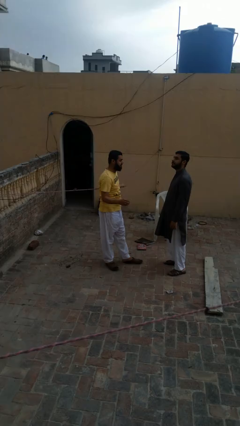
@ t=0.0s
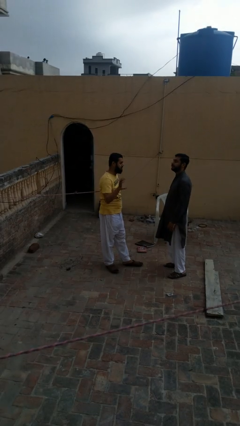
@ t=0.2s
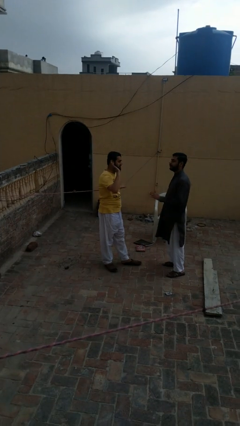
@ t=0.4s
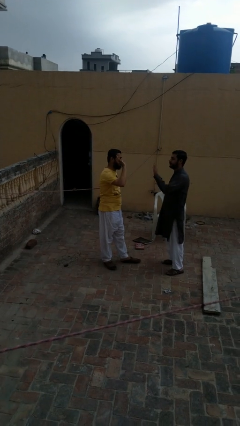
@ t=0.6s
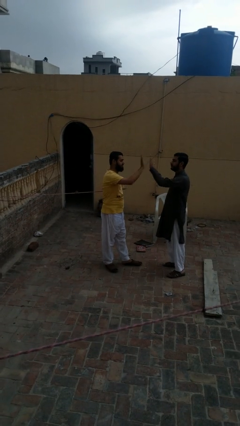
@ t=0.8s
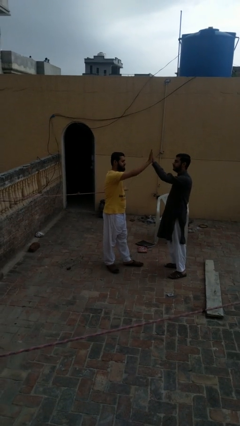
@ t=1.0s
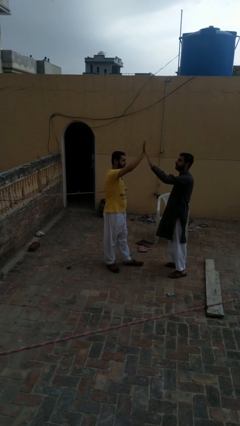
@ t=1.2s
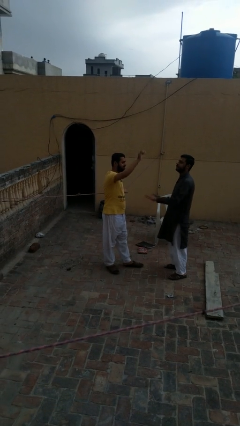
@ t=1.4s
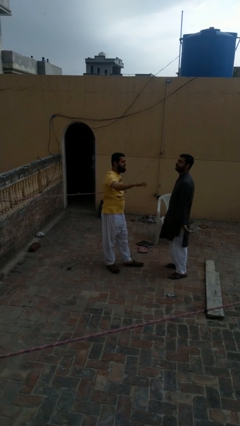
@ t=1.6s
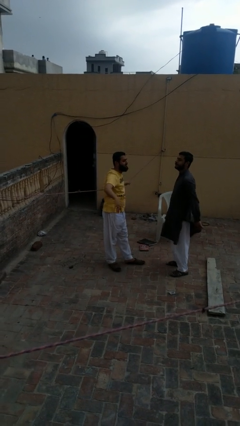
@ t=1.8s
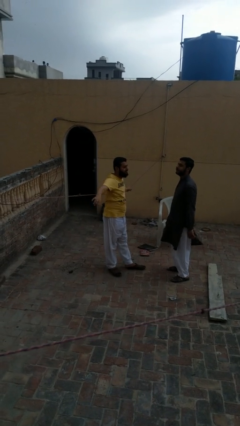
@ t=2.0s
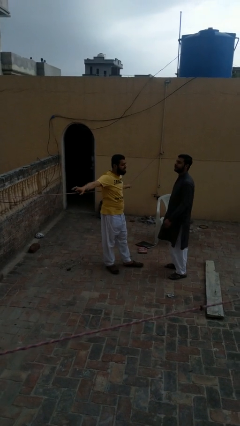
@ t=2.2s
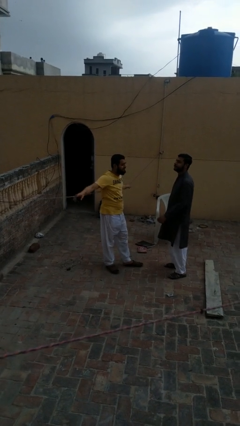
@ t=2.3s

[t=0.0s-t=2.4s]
person highfives hand

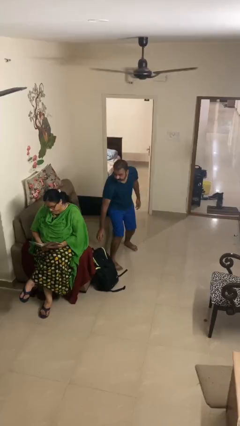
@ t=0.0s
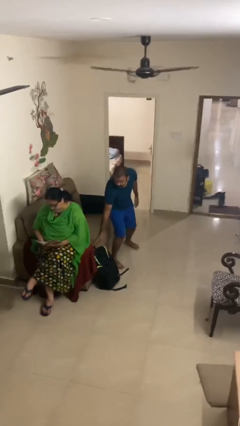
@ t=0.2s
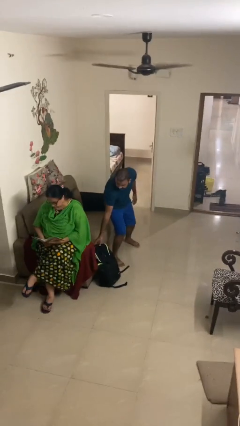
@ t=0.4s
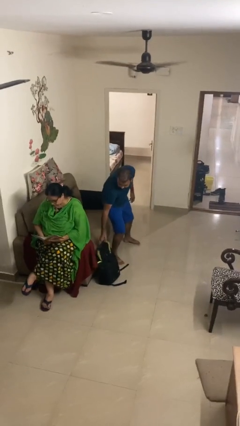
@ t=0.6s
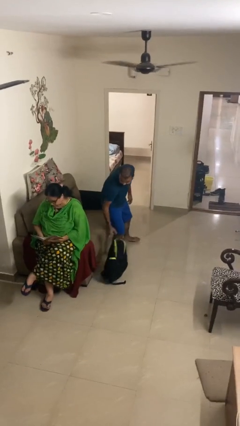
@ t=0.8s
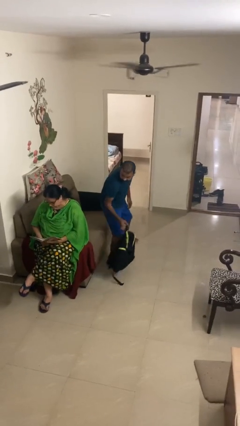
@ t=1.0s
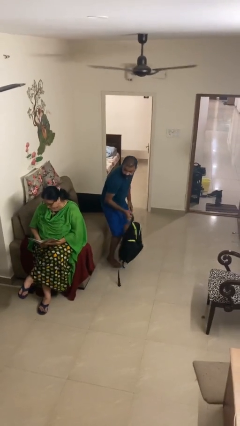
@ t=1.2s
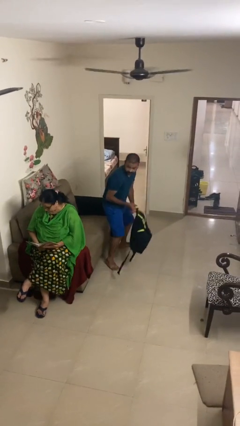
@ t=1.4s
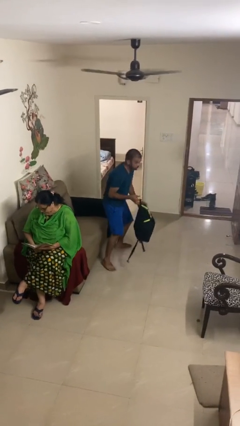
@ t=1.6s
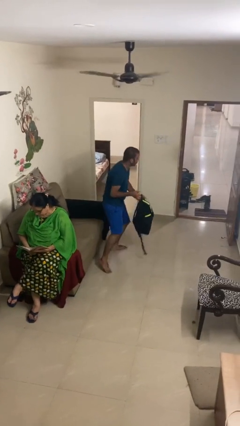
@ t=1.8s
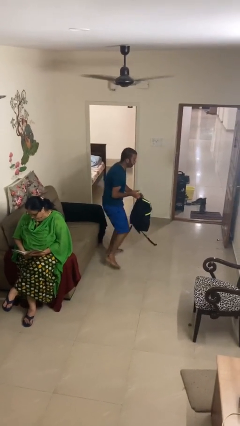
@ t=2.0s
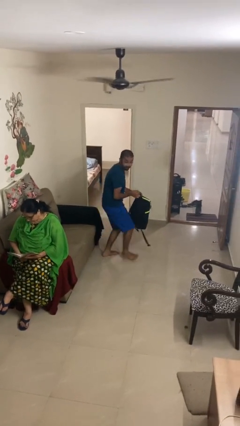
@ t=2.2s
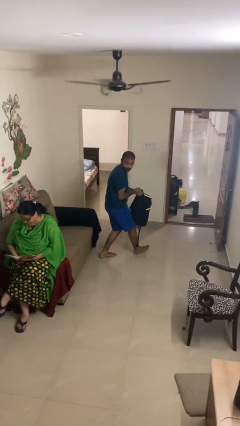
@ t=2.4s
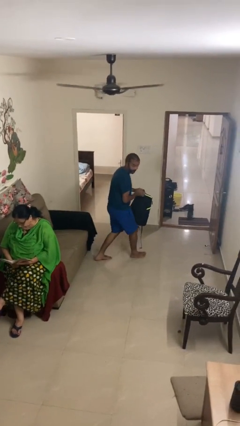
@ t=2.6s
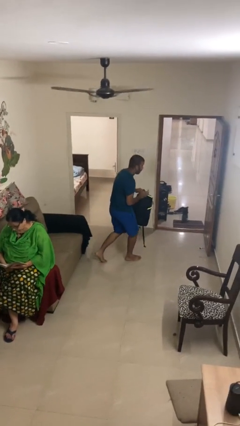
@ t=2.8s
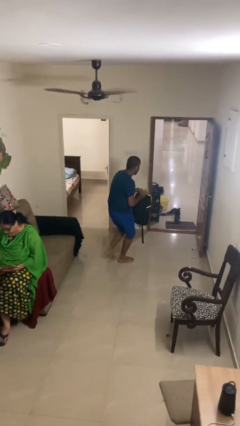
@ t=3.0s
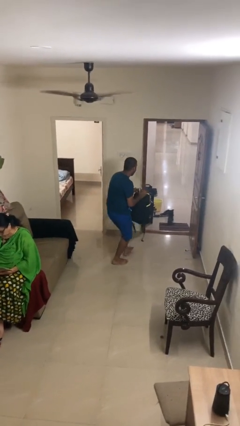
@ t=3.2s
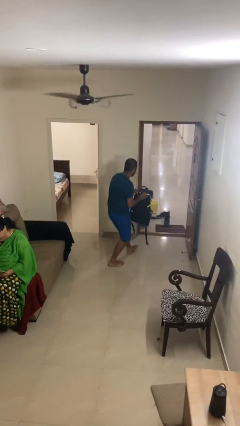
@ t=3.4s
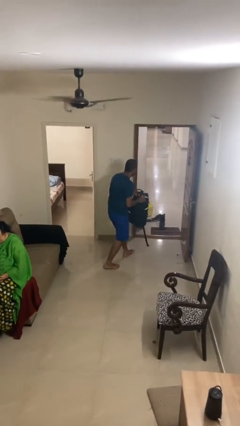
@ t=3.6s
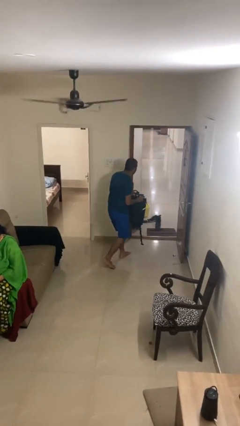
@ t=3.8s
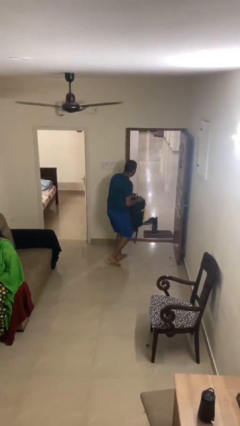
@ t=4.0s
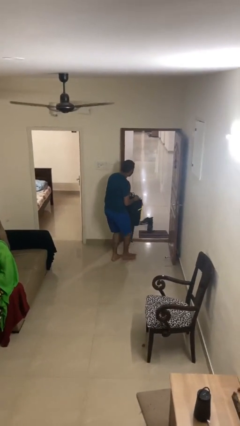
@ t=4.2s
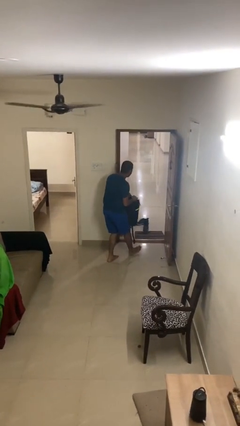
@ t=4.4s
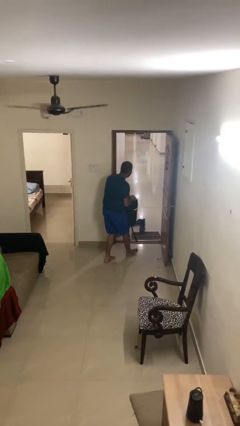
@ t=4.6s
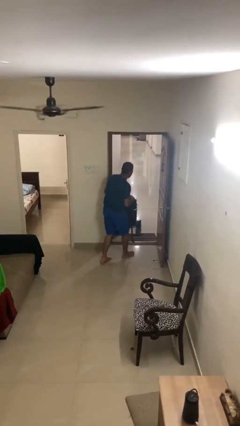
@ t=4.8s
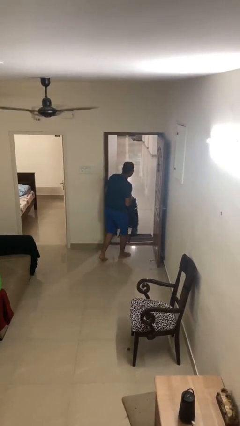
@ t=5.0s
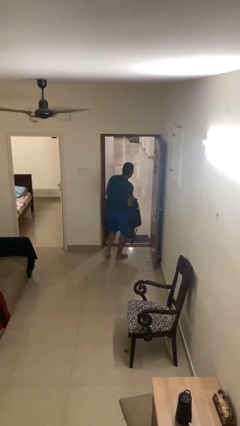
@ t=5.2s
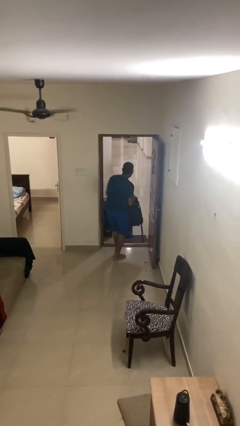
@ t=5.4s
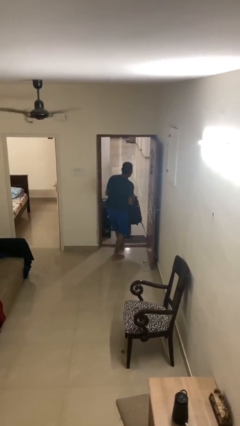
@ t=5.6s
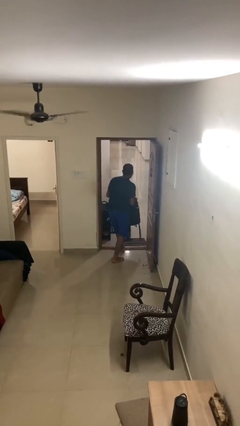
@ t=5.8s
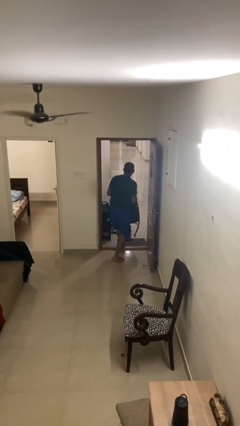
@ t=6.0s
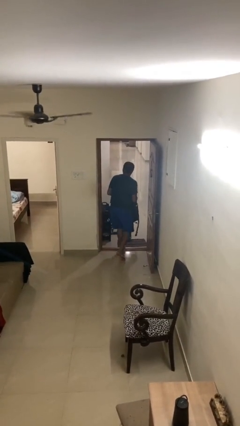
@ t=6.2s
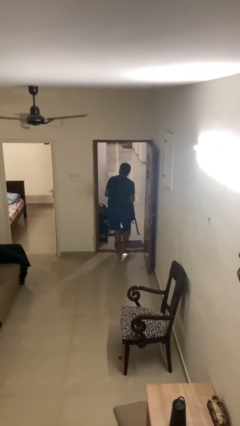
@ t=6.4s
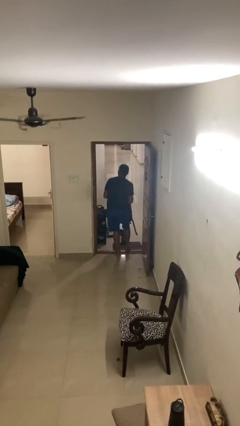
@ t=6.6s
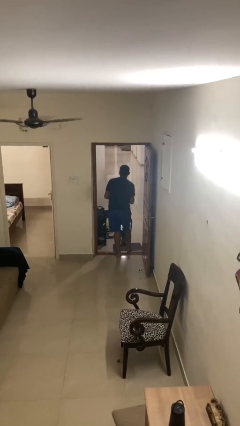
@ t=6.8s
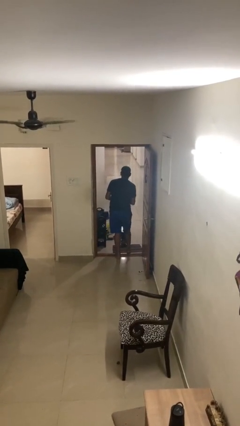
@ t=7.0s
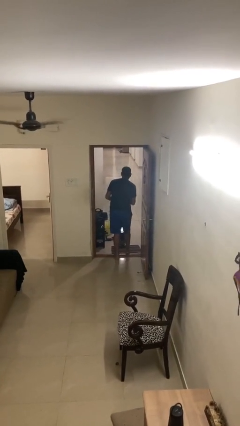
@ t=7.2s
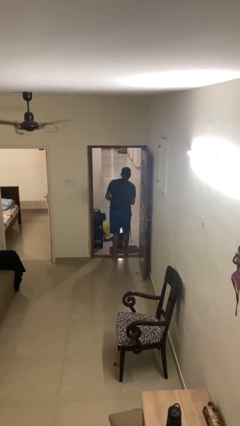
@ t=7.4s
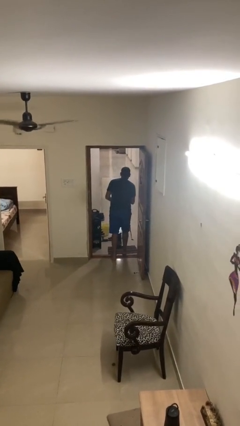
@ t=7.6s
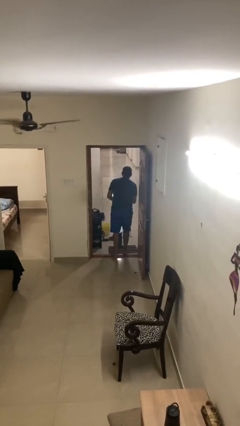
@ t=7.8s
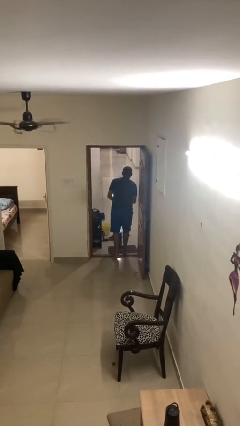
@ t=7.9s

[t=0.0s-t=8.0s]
person steals object from person

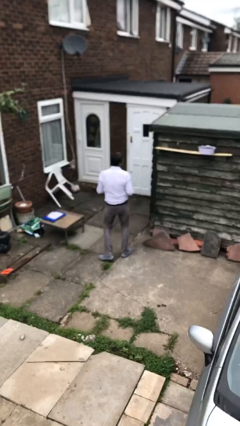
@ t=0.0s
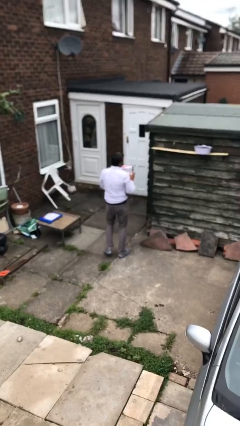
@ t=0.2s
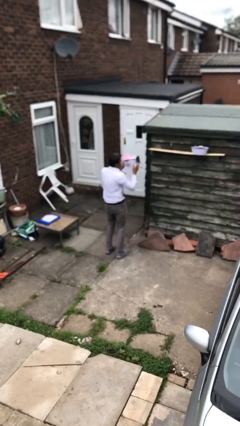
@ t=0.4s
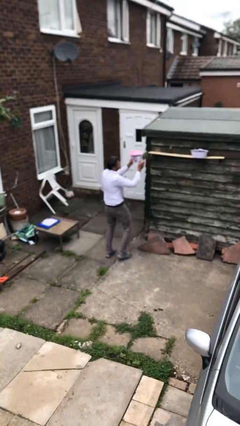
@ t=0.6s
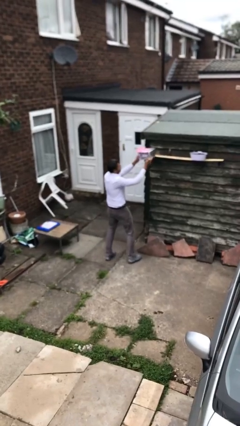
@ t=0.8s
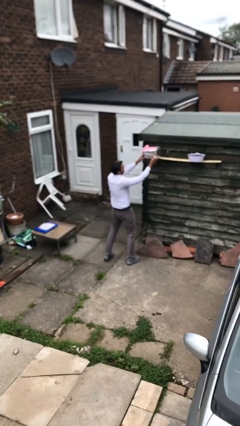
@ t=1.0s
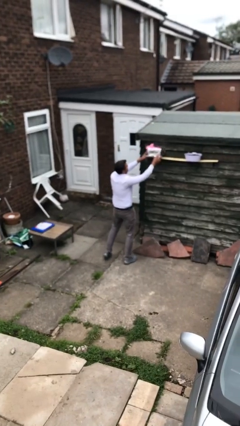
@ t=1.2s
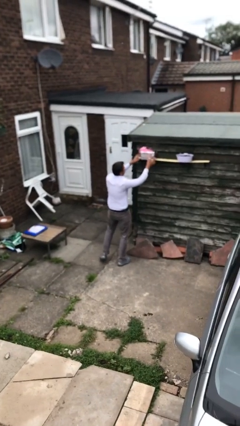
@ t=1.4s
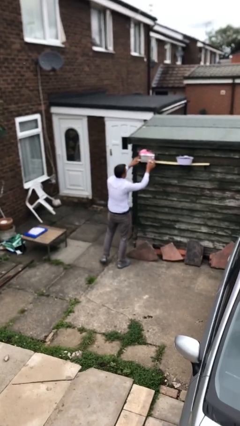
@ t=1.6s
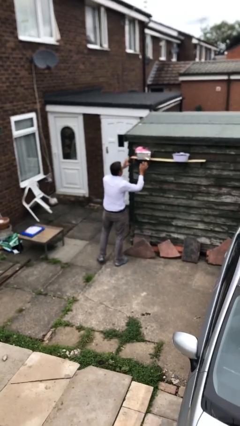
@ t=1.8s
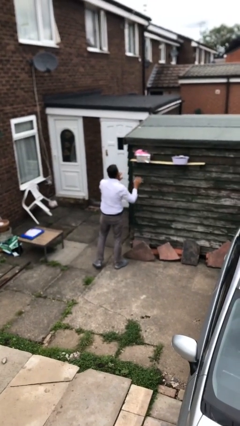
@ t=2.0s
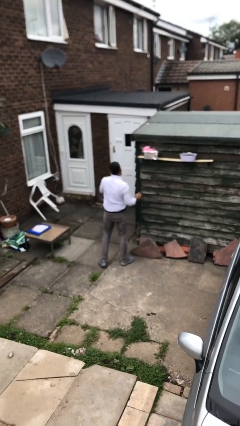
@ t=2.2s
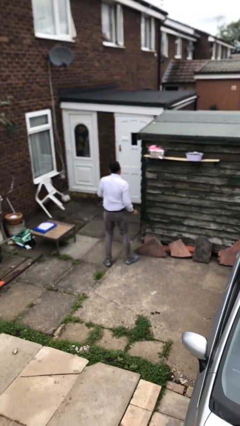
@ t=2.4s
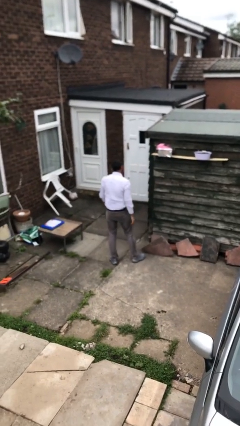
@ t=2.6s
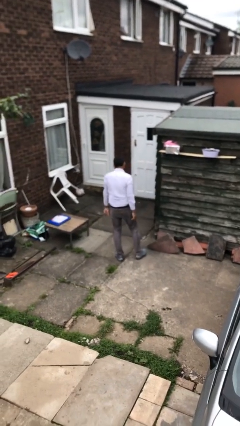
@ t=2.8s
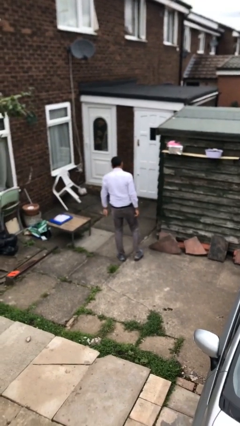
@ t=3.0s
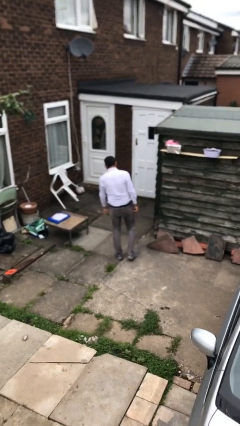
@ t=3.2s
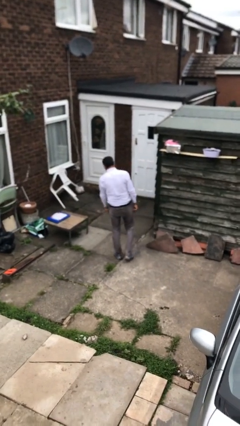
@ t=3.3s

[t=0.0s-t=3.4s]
person puts down object on shelf

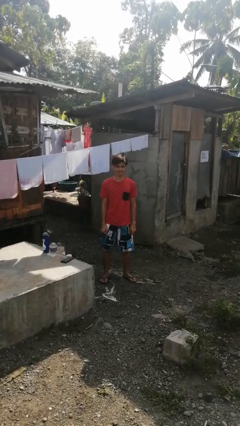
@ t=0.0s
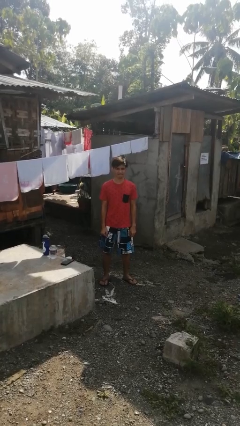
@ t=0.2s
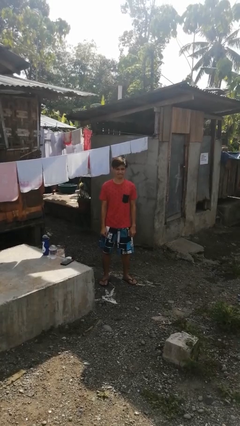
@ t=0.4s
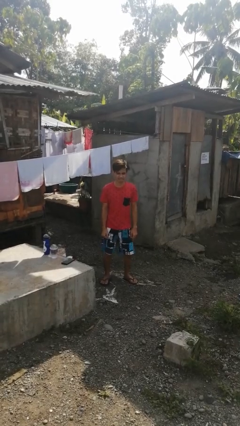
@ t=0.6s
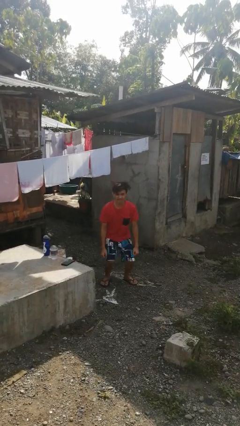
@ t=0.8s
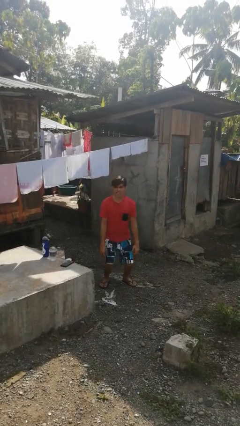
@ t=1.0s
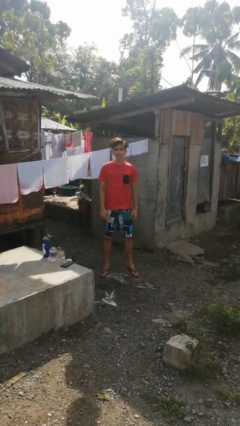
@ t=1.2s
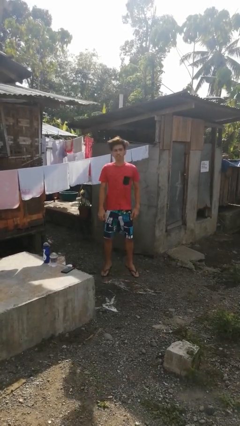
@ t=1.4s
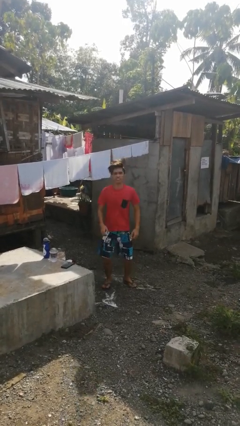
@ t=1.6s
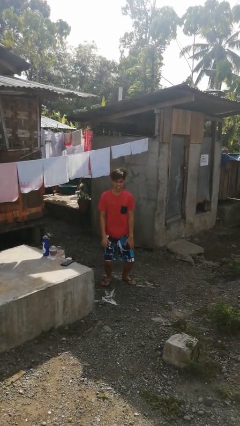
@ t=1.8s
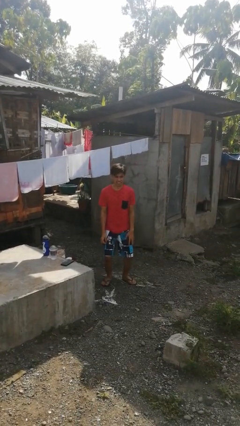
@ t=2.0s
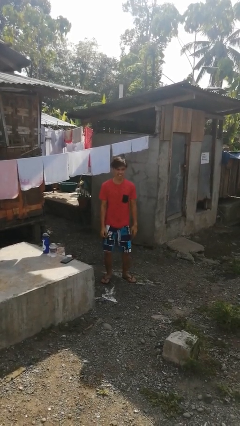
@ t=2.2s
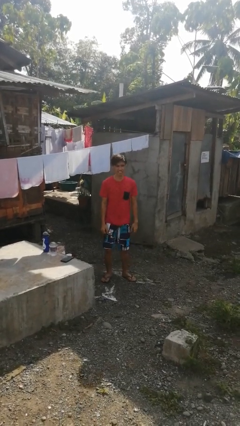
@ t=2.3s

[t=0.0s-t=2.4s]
person jumps

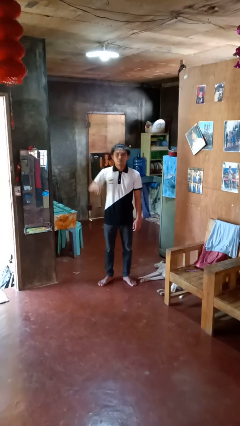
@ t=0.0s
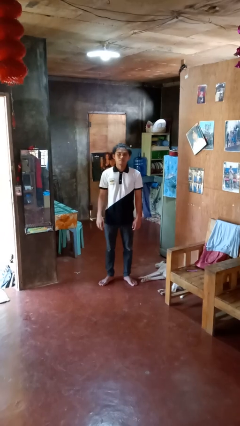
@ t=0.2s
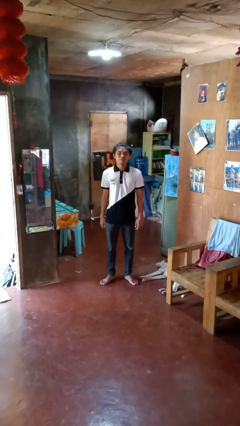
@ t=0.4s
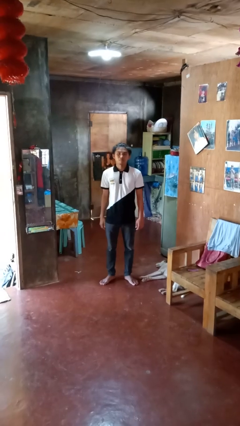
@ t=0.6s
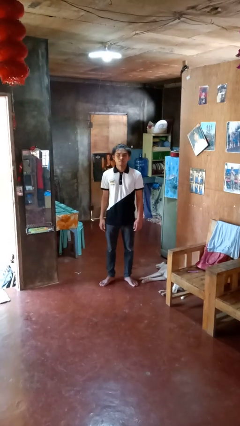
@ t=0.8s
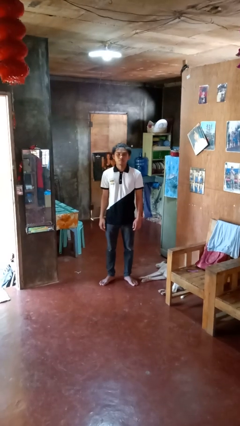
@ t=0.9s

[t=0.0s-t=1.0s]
person gestures lower hand

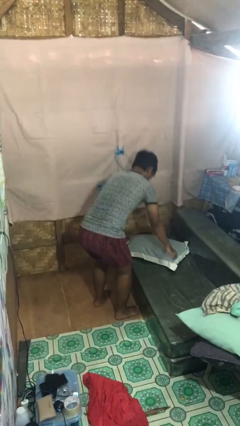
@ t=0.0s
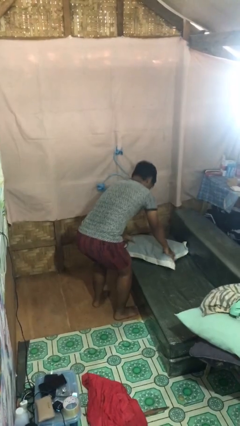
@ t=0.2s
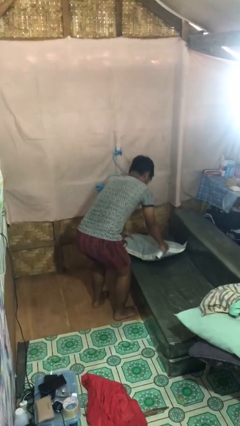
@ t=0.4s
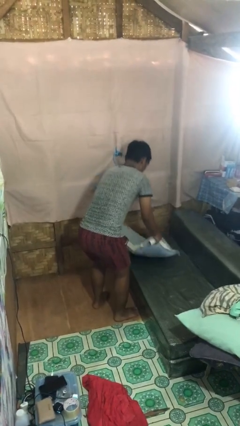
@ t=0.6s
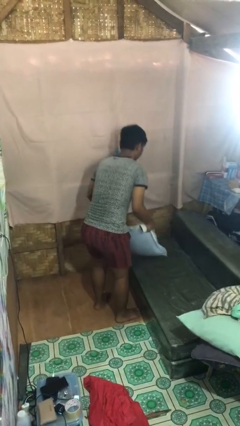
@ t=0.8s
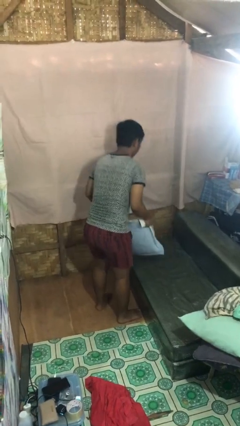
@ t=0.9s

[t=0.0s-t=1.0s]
person picks up object from couch
